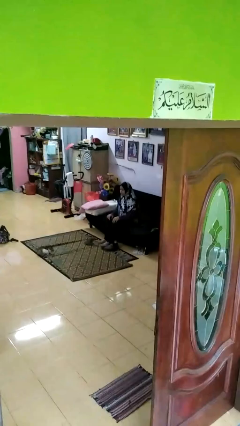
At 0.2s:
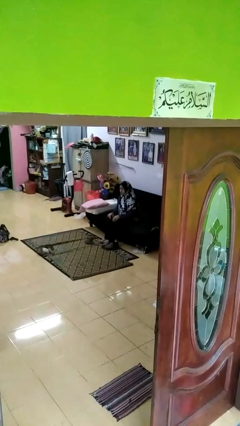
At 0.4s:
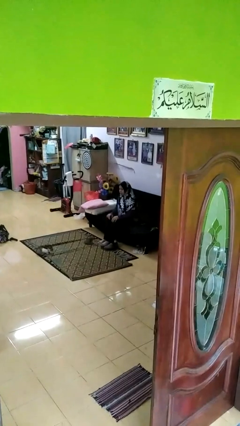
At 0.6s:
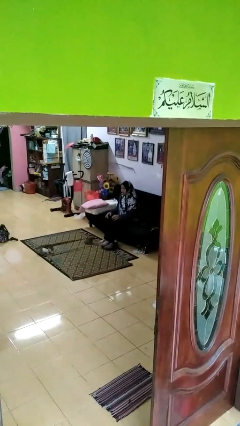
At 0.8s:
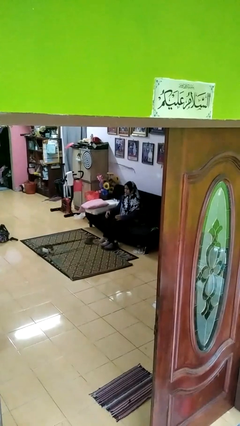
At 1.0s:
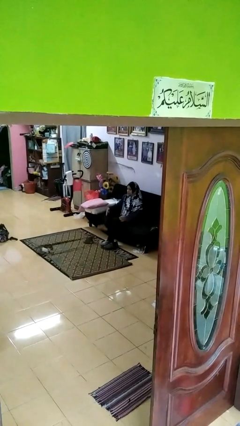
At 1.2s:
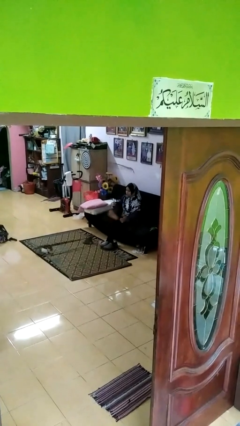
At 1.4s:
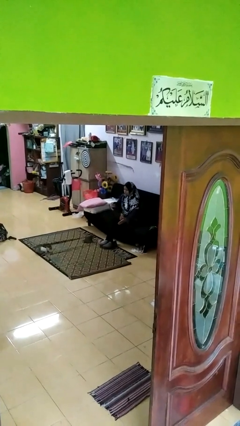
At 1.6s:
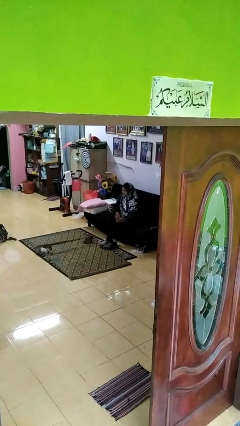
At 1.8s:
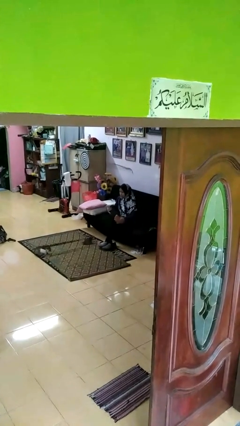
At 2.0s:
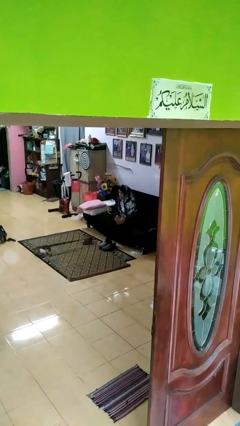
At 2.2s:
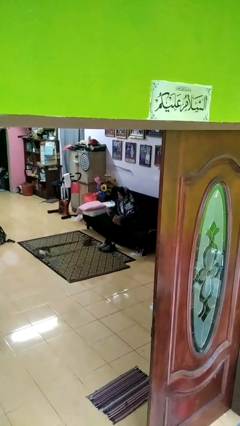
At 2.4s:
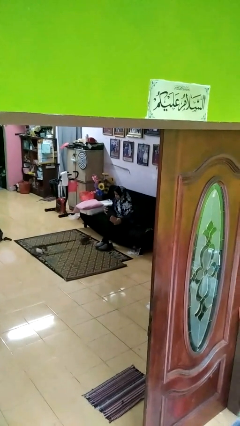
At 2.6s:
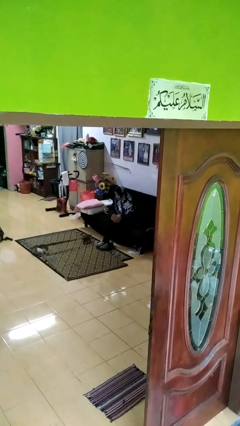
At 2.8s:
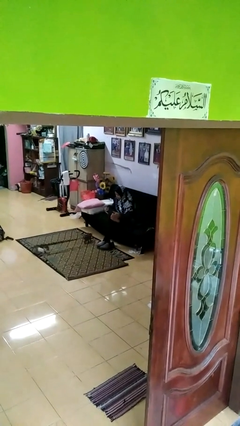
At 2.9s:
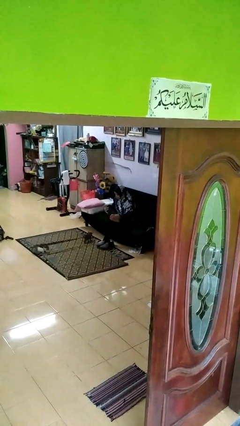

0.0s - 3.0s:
person rubs foot

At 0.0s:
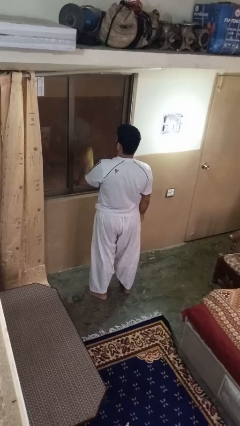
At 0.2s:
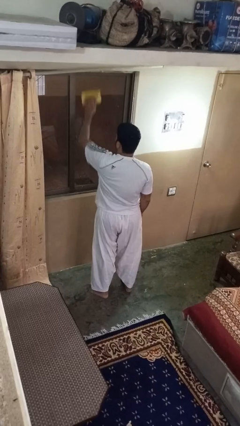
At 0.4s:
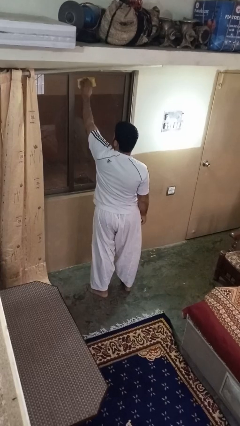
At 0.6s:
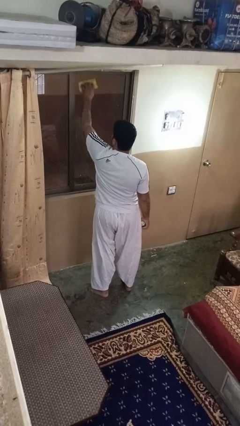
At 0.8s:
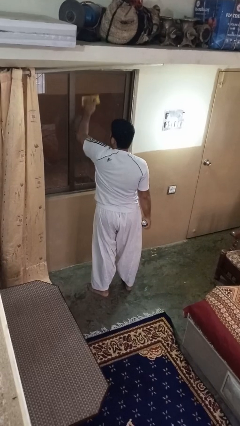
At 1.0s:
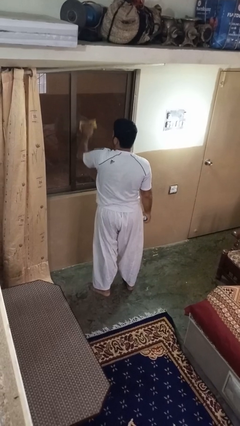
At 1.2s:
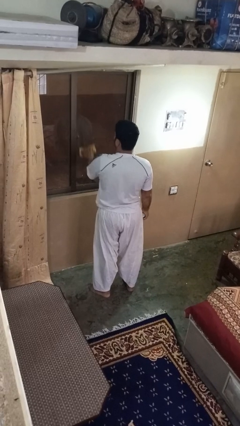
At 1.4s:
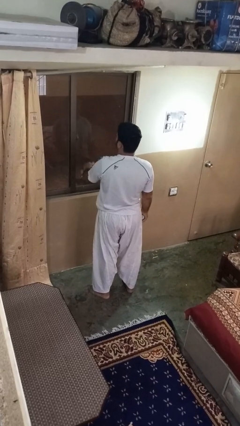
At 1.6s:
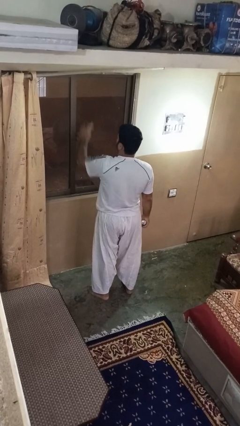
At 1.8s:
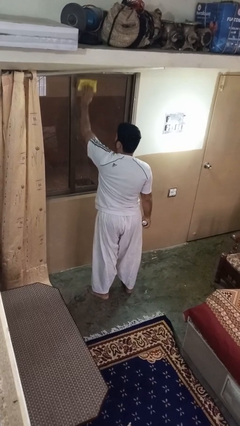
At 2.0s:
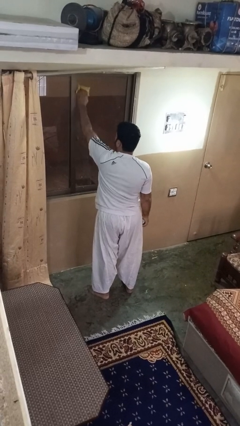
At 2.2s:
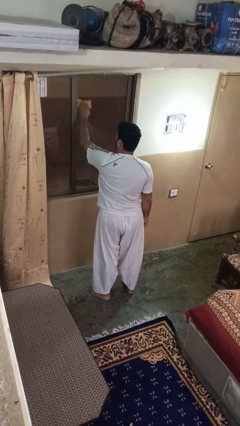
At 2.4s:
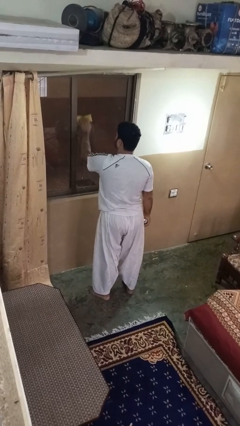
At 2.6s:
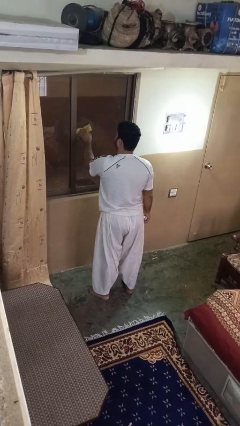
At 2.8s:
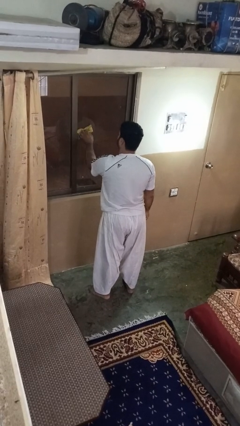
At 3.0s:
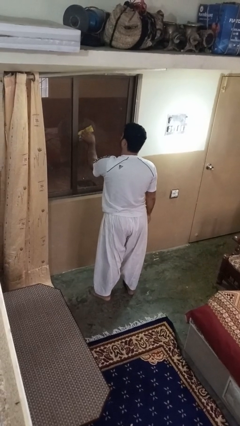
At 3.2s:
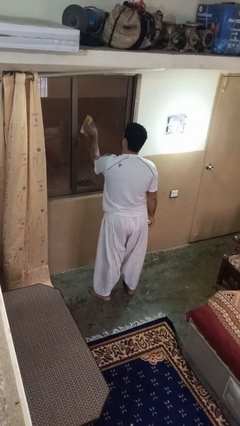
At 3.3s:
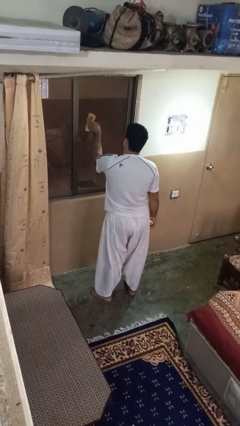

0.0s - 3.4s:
person washes window

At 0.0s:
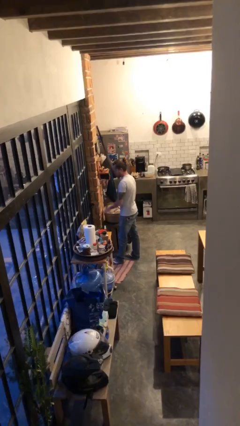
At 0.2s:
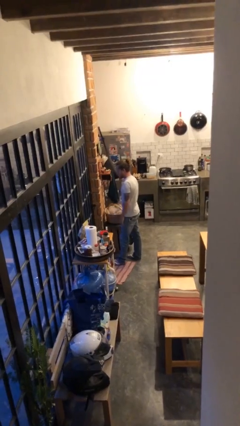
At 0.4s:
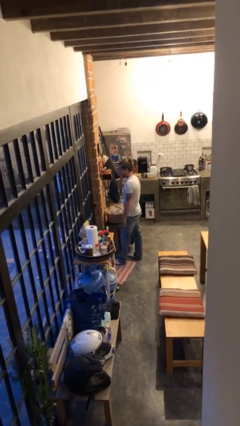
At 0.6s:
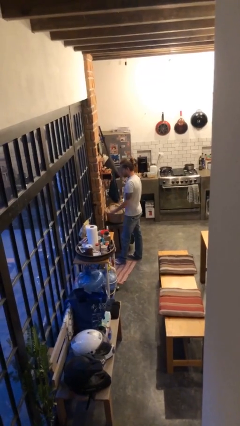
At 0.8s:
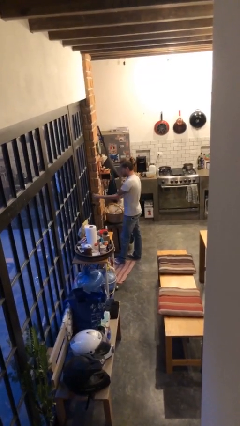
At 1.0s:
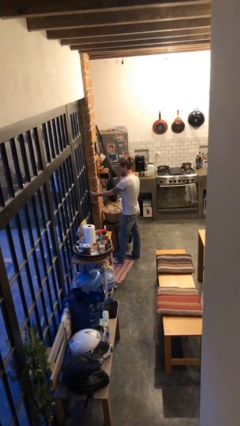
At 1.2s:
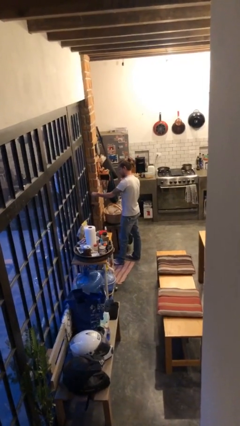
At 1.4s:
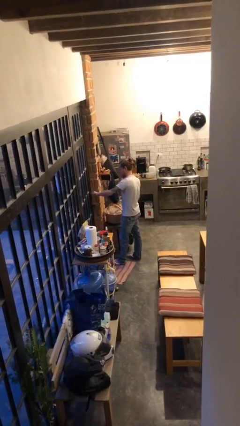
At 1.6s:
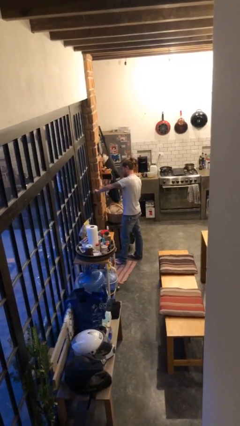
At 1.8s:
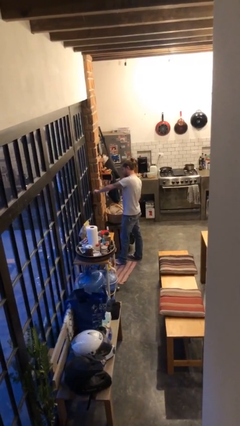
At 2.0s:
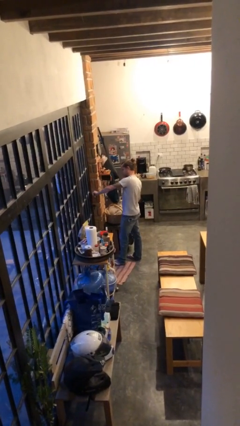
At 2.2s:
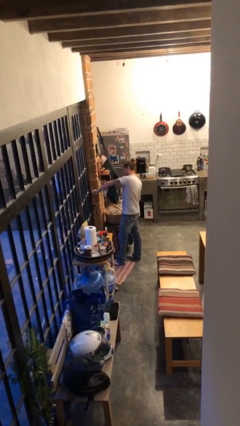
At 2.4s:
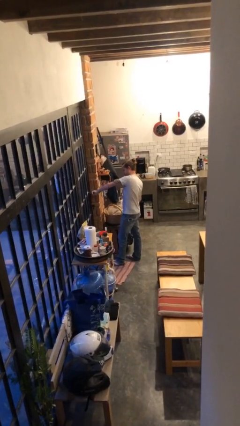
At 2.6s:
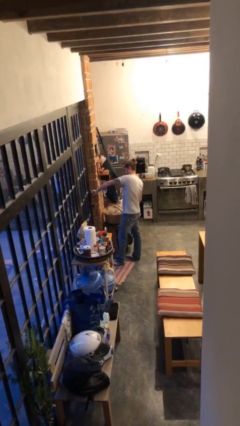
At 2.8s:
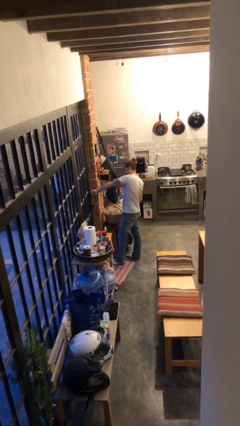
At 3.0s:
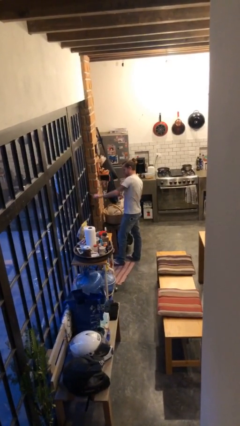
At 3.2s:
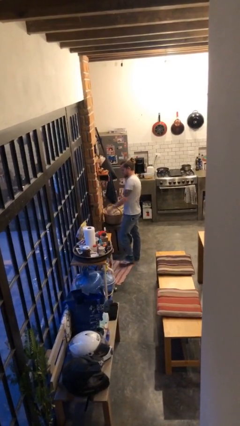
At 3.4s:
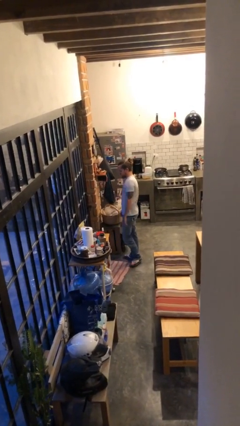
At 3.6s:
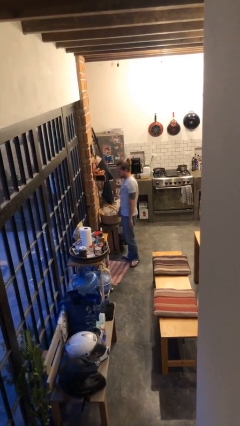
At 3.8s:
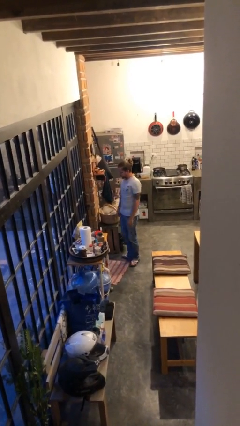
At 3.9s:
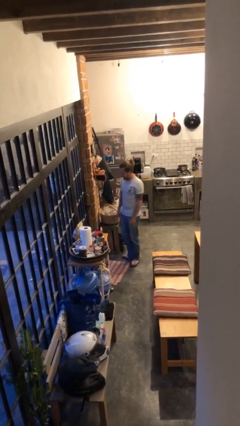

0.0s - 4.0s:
person locks door with keys

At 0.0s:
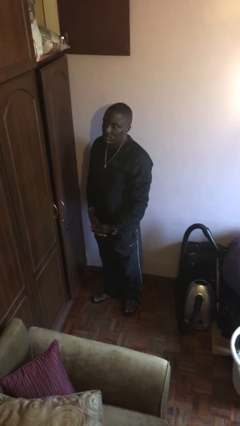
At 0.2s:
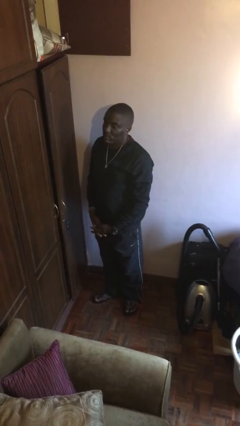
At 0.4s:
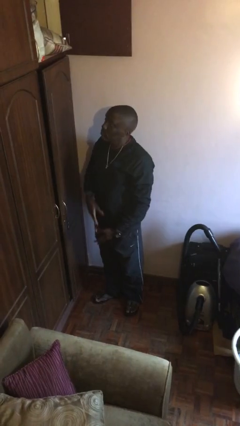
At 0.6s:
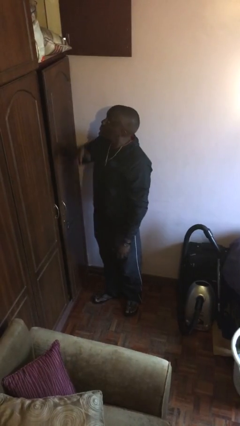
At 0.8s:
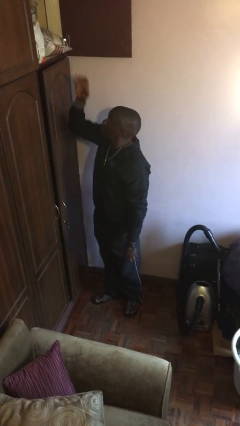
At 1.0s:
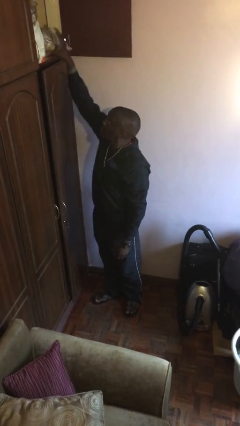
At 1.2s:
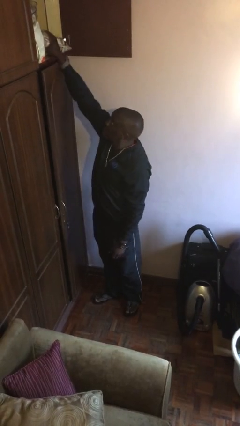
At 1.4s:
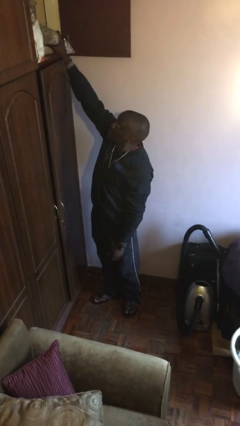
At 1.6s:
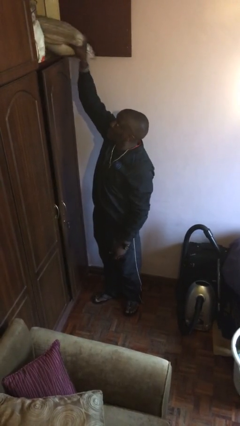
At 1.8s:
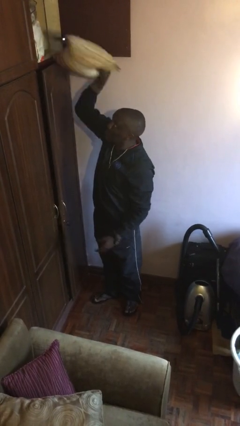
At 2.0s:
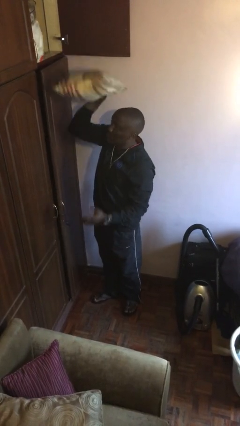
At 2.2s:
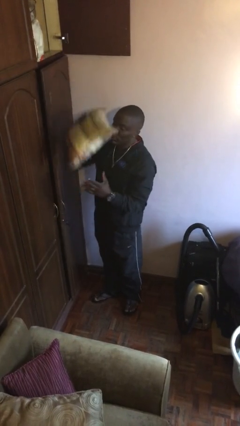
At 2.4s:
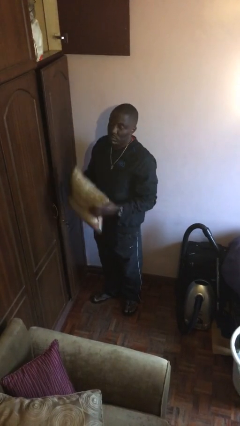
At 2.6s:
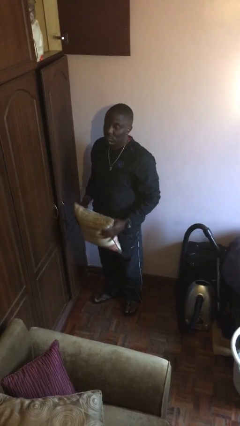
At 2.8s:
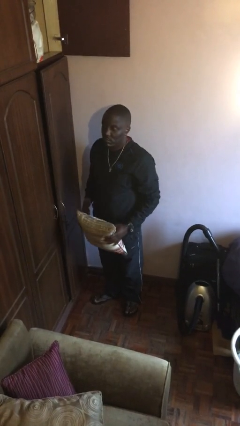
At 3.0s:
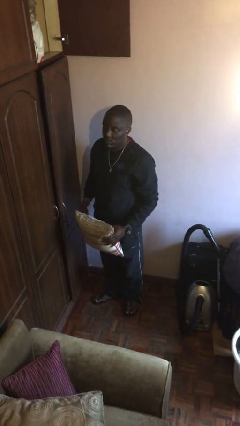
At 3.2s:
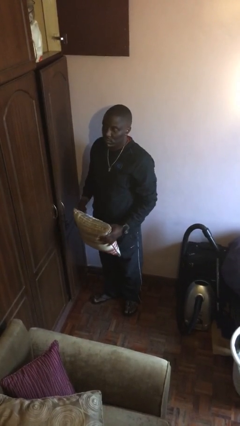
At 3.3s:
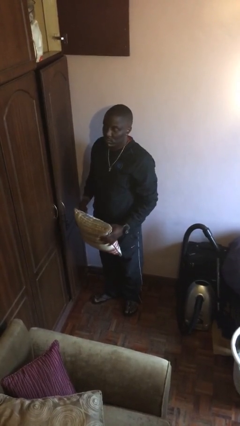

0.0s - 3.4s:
person picks up object from shelf

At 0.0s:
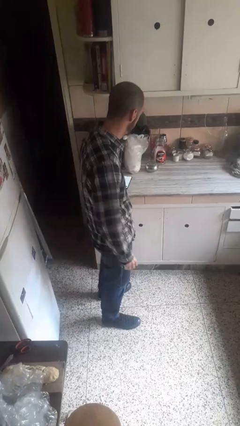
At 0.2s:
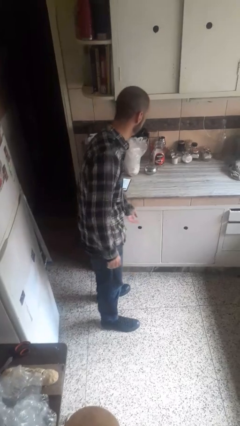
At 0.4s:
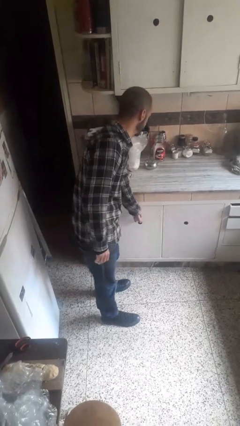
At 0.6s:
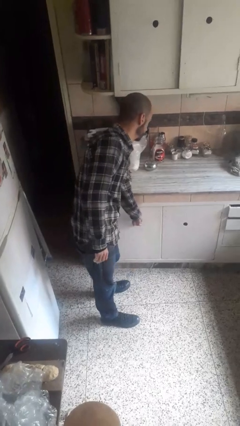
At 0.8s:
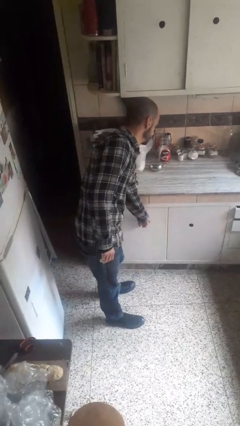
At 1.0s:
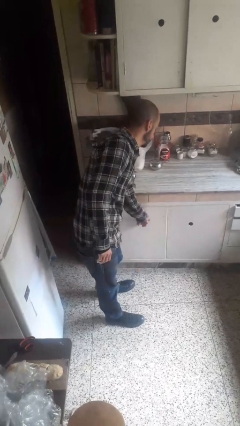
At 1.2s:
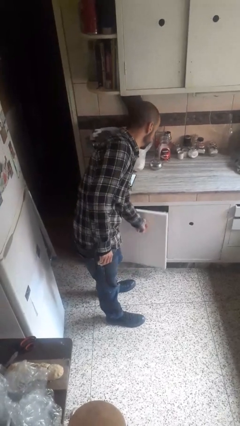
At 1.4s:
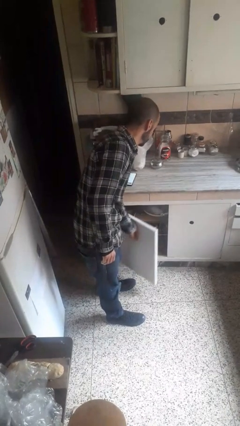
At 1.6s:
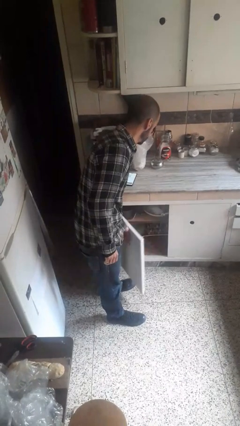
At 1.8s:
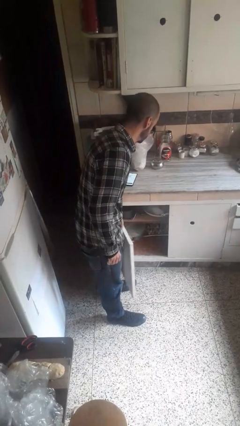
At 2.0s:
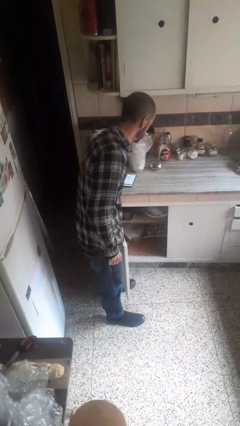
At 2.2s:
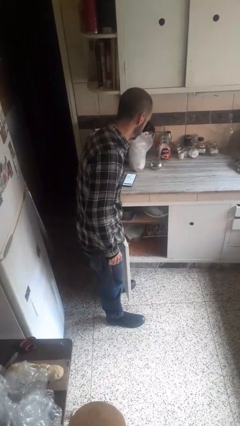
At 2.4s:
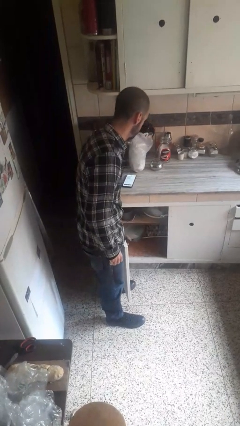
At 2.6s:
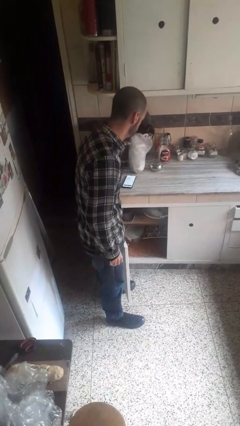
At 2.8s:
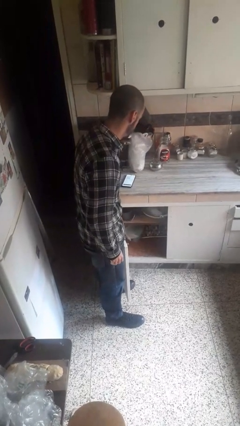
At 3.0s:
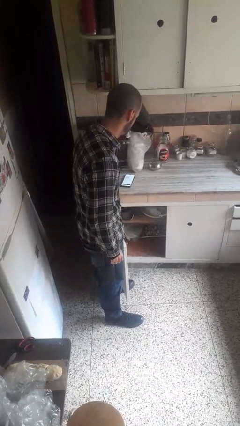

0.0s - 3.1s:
person opens closet door

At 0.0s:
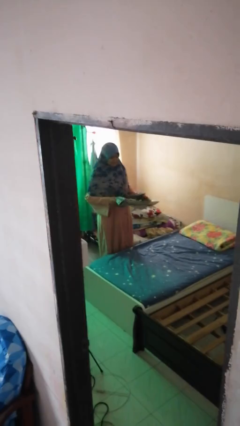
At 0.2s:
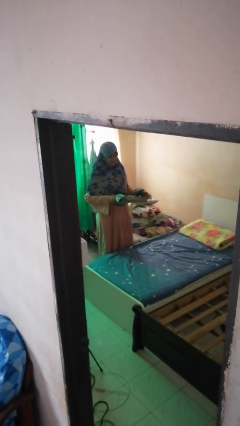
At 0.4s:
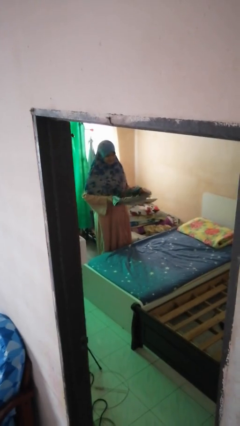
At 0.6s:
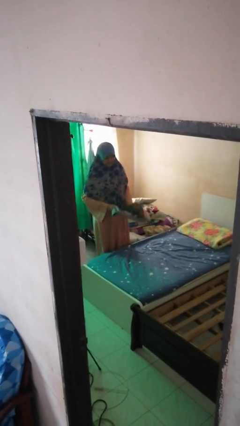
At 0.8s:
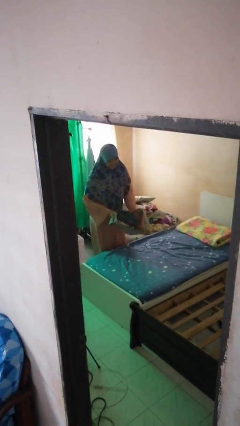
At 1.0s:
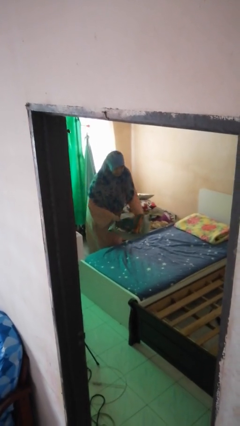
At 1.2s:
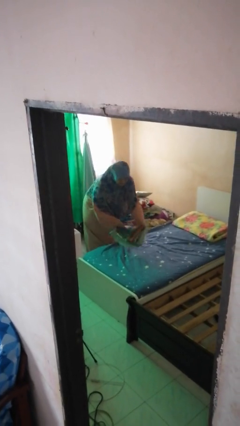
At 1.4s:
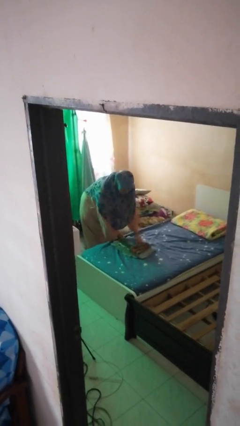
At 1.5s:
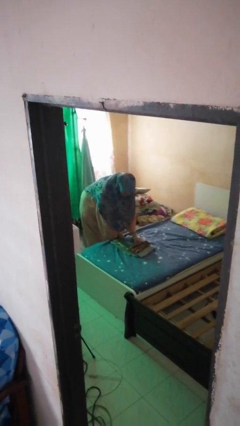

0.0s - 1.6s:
person puts down object on bed
